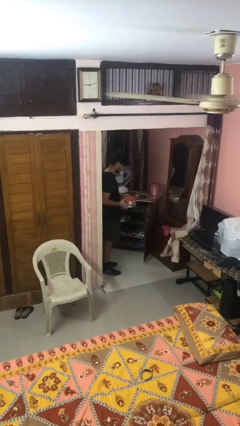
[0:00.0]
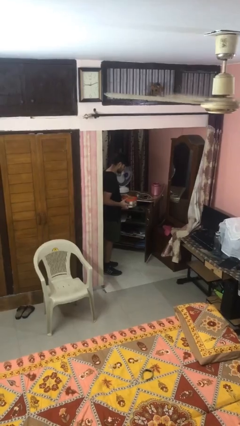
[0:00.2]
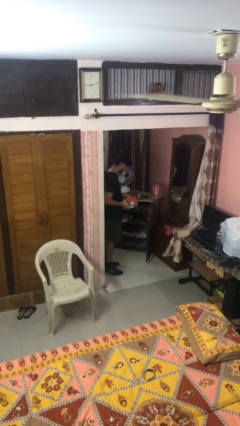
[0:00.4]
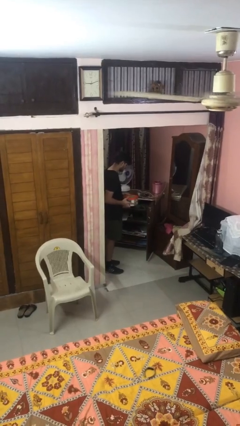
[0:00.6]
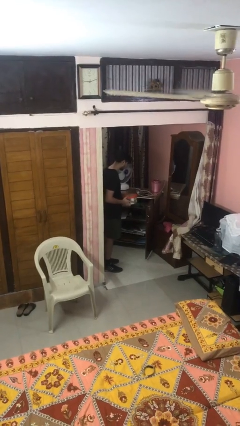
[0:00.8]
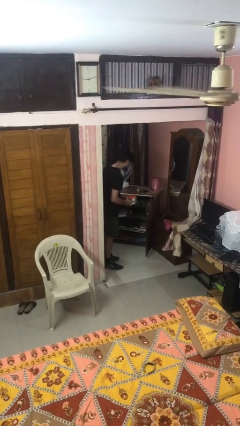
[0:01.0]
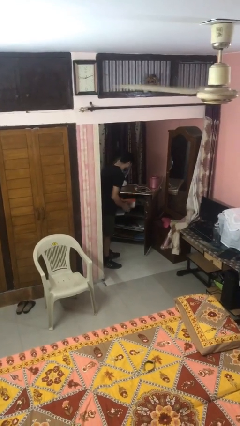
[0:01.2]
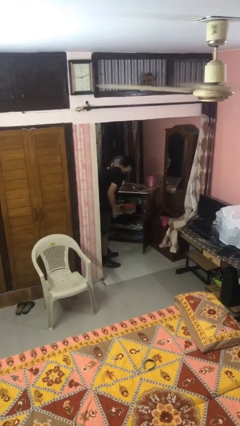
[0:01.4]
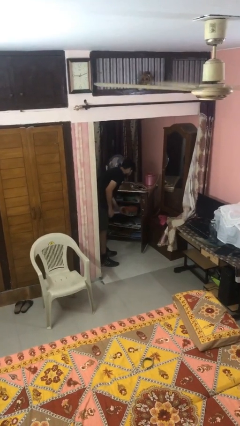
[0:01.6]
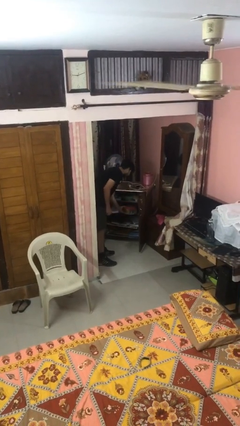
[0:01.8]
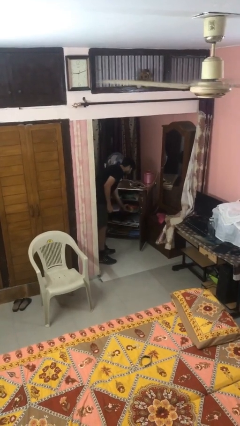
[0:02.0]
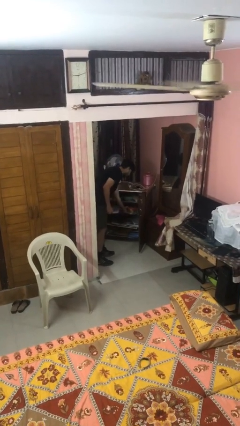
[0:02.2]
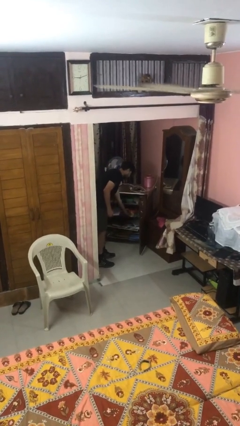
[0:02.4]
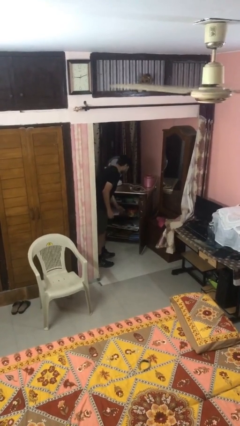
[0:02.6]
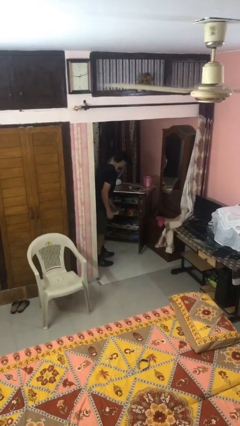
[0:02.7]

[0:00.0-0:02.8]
person puts down object into cabinet

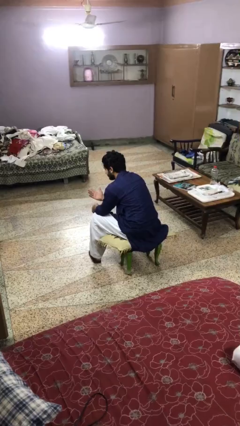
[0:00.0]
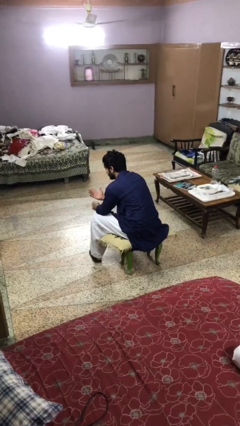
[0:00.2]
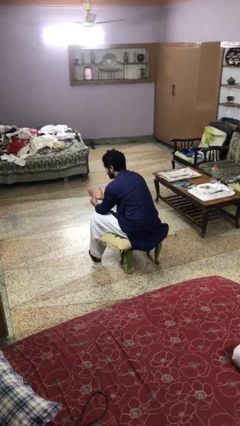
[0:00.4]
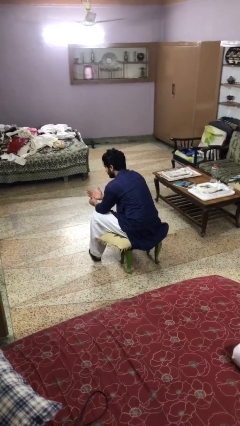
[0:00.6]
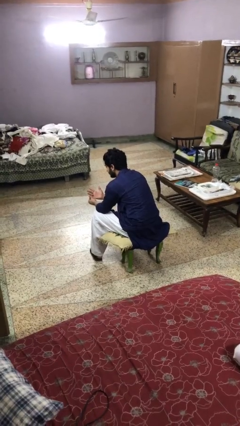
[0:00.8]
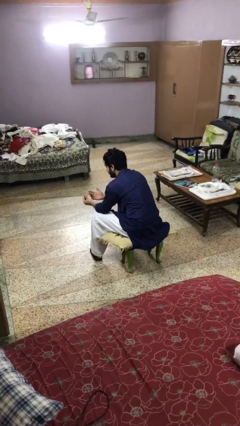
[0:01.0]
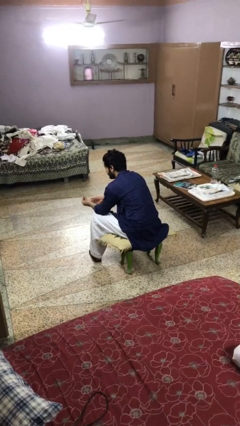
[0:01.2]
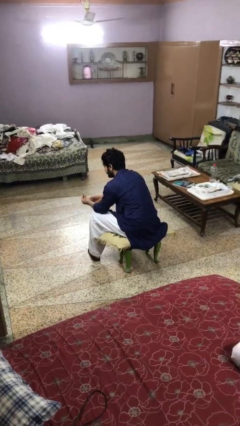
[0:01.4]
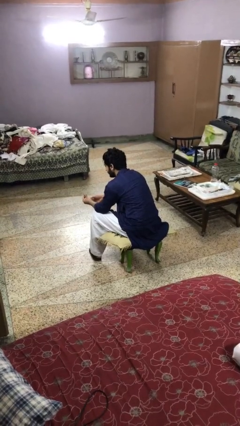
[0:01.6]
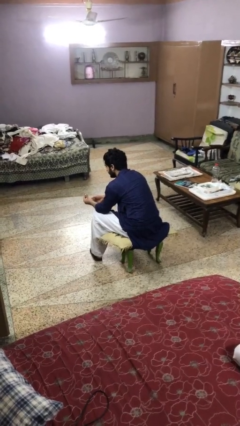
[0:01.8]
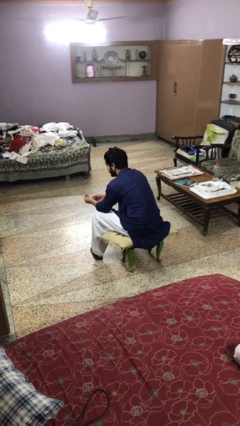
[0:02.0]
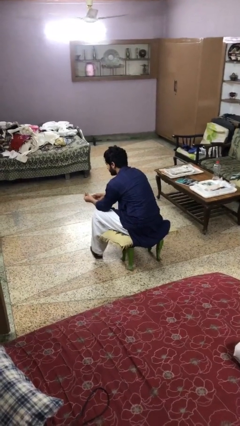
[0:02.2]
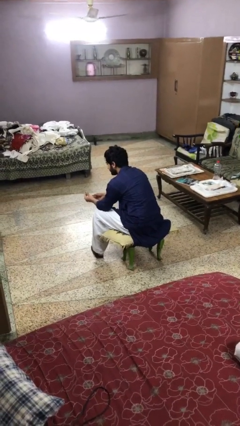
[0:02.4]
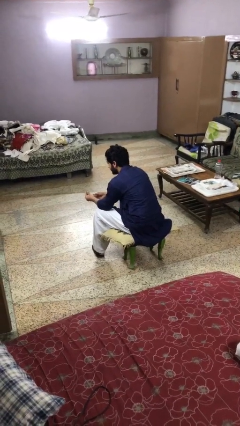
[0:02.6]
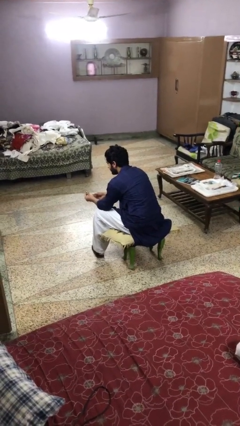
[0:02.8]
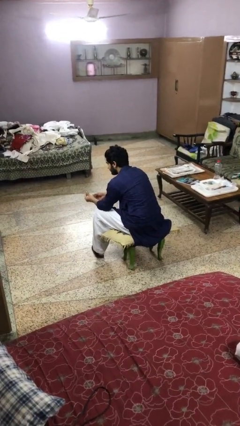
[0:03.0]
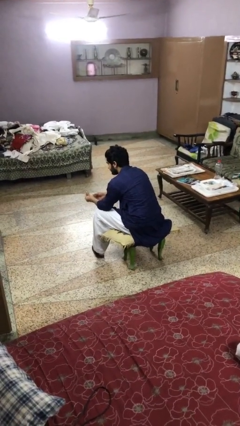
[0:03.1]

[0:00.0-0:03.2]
person takes off ring

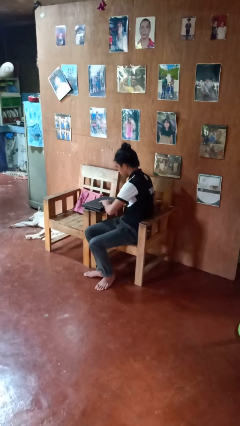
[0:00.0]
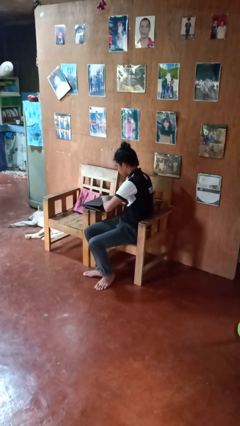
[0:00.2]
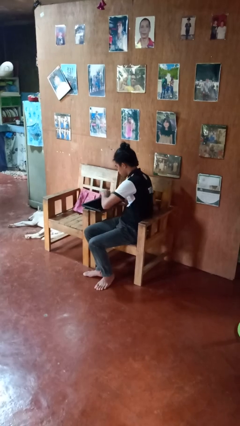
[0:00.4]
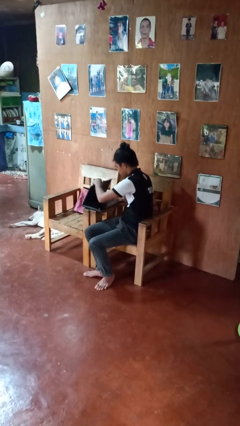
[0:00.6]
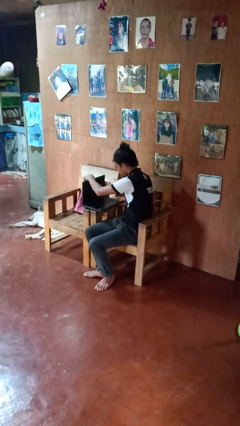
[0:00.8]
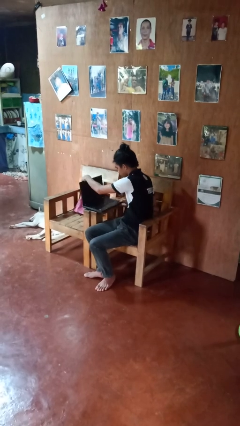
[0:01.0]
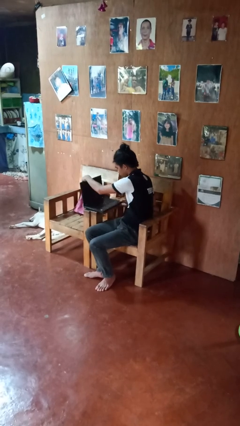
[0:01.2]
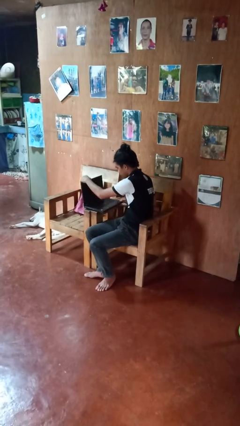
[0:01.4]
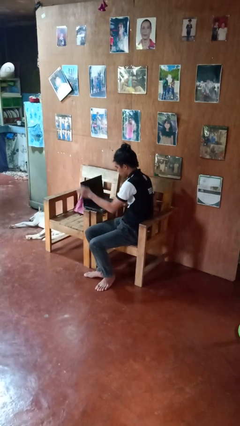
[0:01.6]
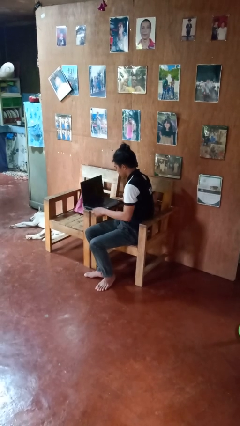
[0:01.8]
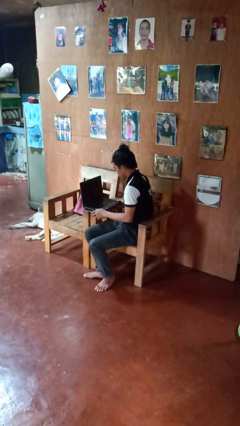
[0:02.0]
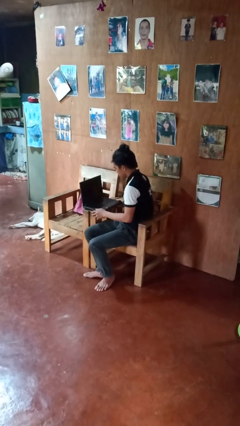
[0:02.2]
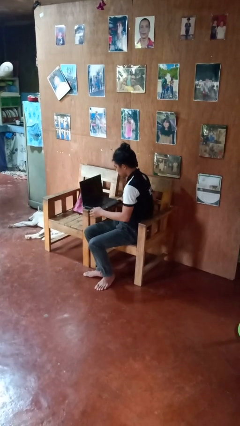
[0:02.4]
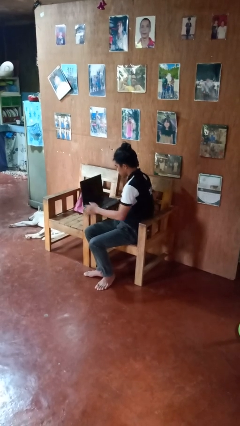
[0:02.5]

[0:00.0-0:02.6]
person opens laptop

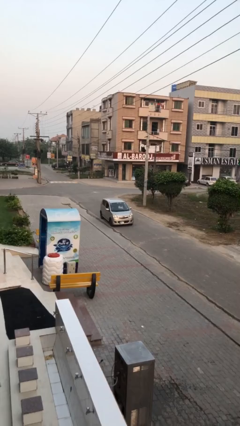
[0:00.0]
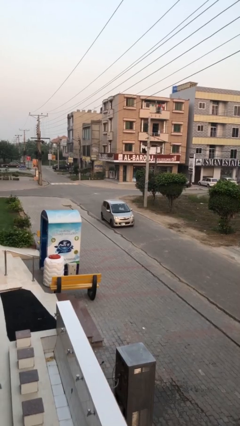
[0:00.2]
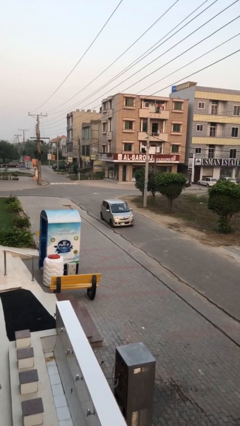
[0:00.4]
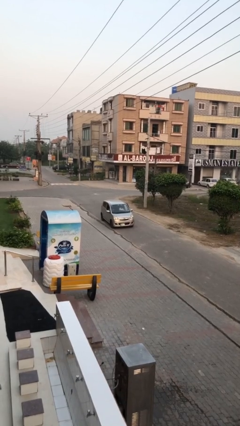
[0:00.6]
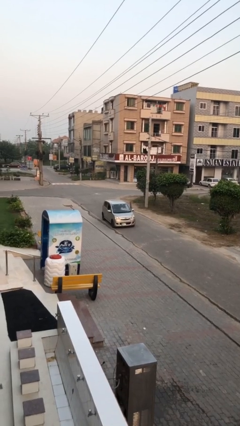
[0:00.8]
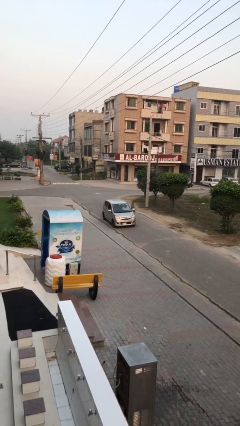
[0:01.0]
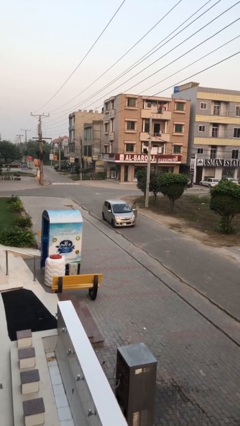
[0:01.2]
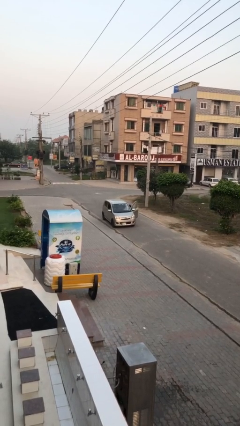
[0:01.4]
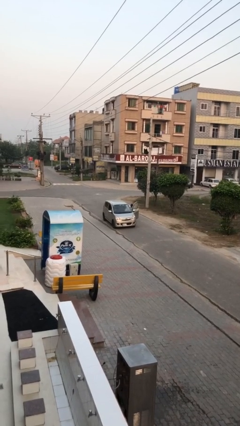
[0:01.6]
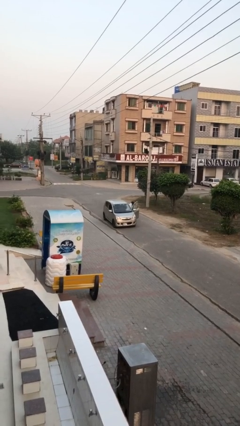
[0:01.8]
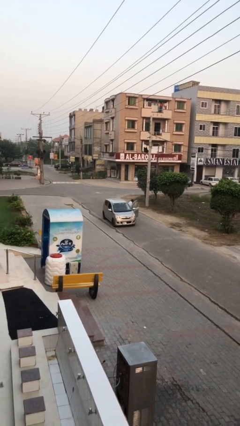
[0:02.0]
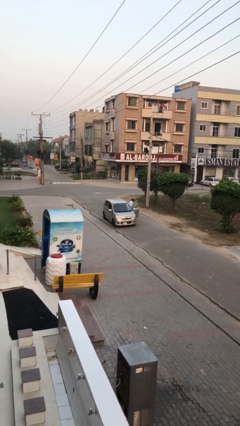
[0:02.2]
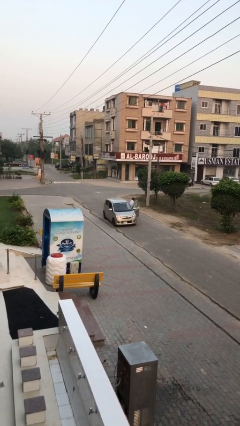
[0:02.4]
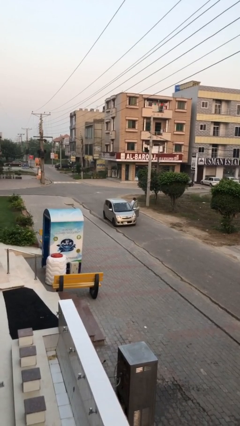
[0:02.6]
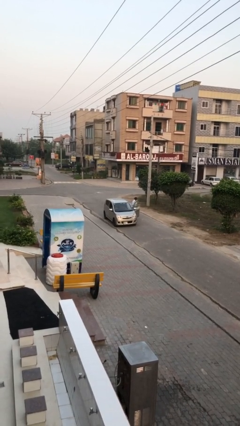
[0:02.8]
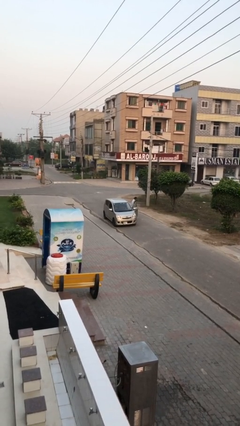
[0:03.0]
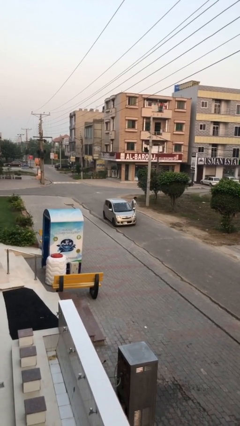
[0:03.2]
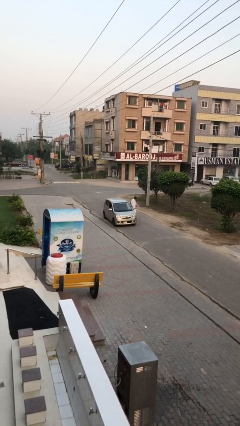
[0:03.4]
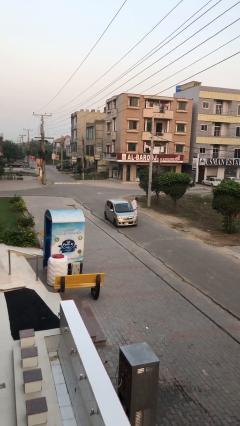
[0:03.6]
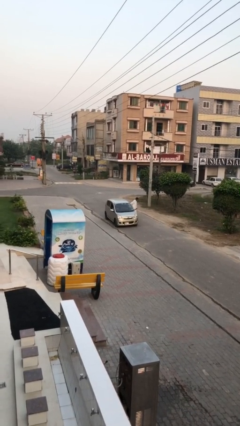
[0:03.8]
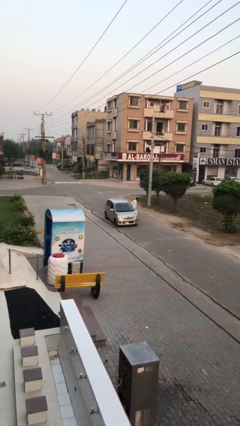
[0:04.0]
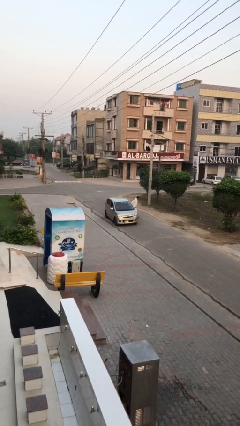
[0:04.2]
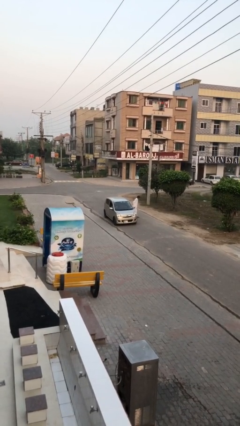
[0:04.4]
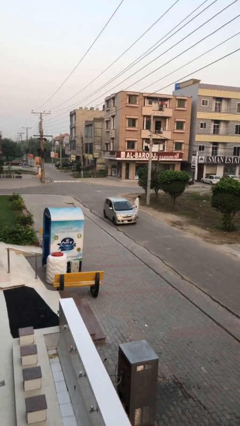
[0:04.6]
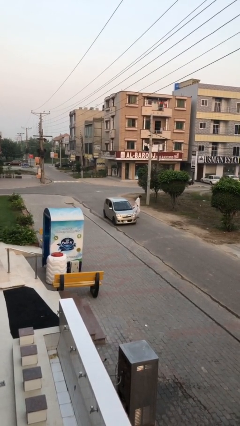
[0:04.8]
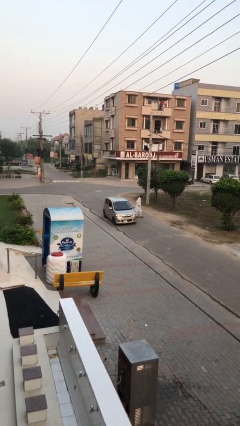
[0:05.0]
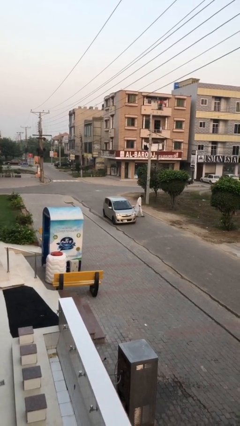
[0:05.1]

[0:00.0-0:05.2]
car drops off person

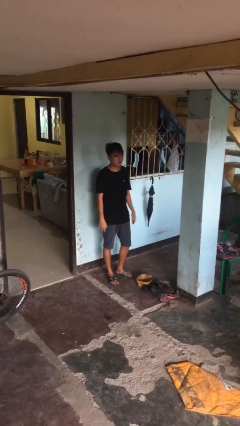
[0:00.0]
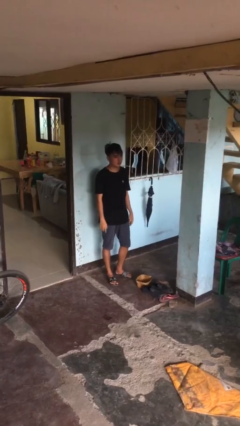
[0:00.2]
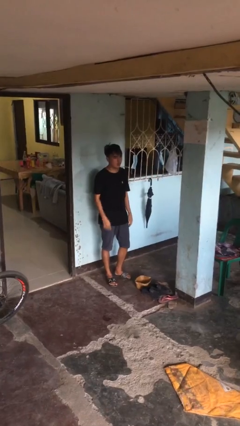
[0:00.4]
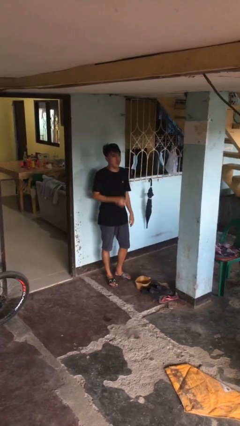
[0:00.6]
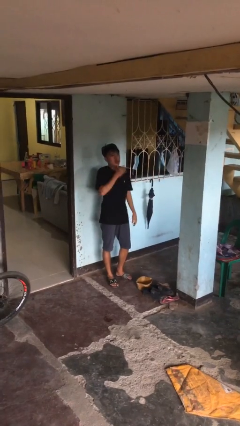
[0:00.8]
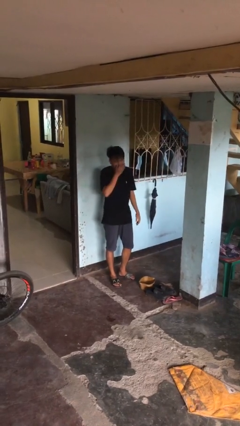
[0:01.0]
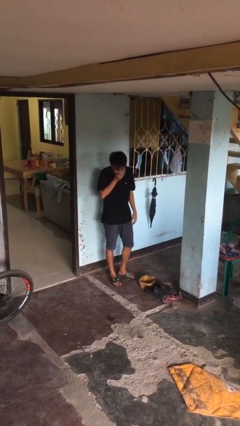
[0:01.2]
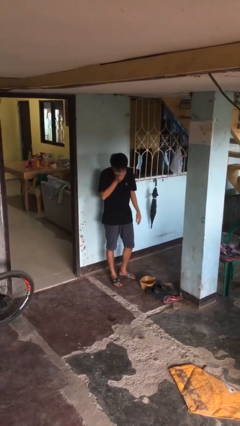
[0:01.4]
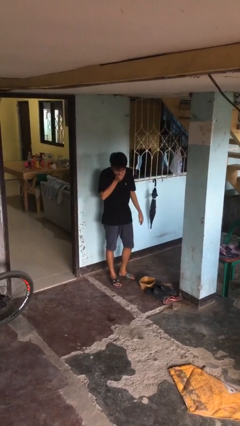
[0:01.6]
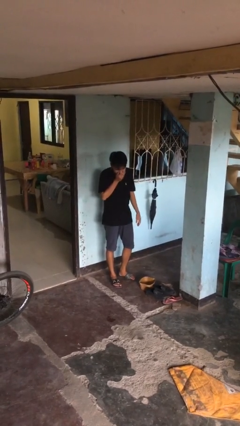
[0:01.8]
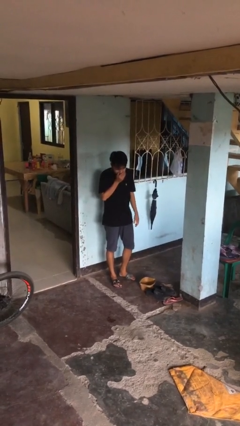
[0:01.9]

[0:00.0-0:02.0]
person sneezes into hand

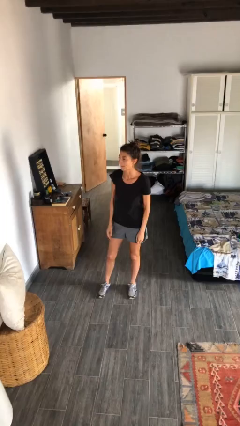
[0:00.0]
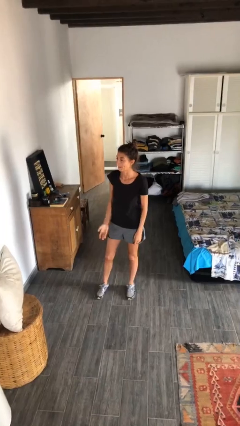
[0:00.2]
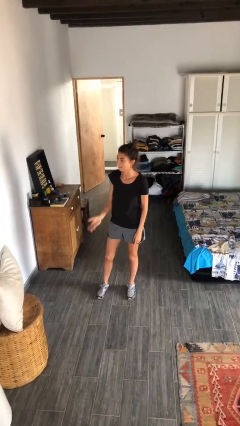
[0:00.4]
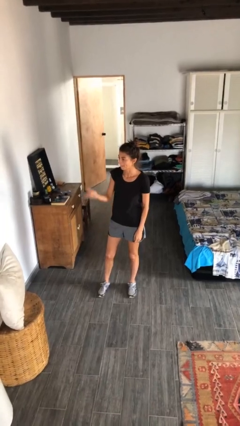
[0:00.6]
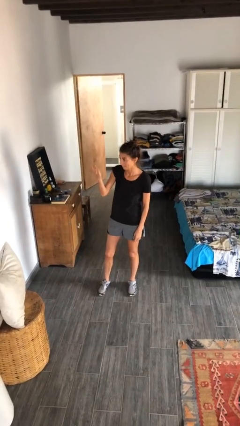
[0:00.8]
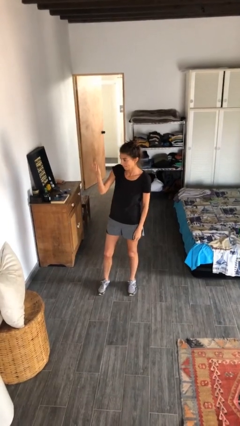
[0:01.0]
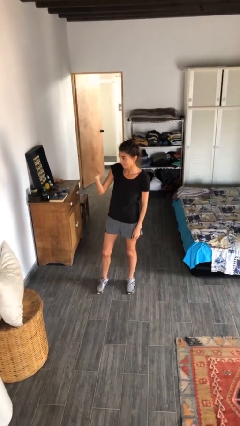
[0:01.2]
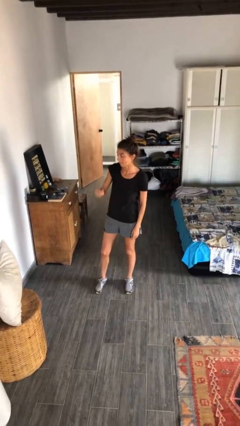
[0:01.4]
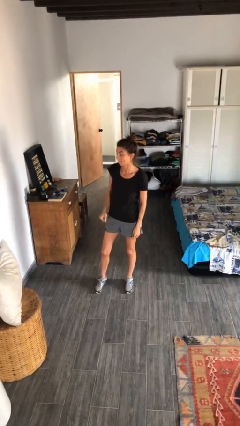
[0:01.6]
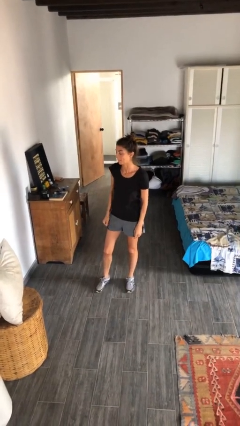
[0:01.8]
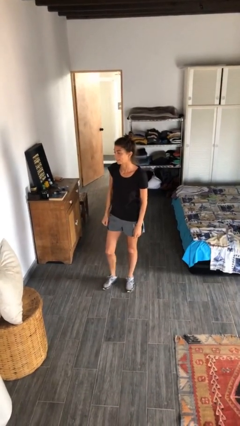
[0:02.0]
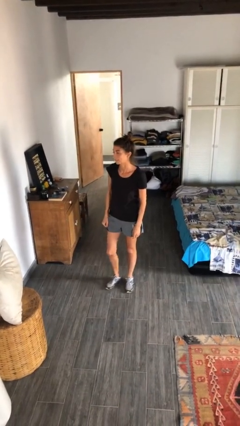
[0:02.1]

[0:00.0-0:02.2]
person gestures swipe up
